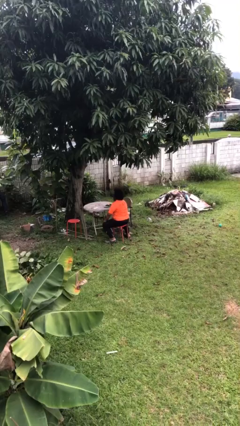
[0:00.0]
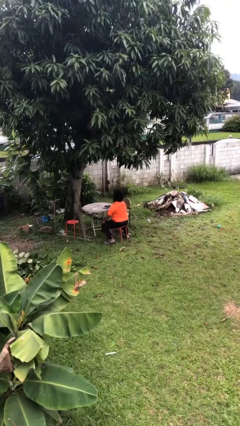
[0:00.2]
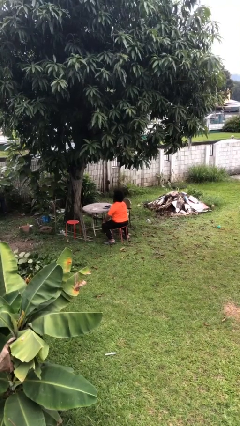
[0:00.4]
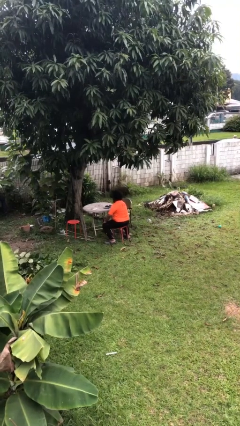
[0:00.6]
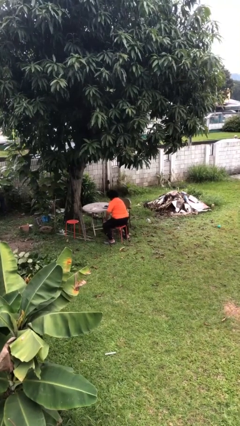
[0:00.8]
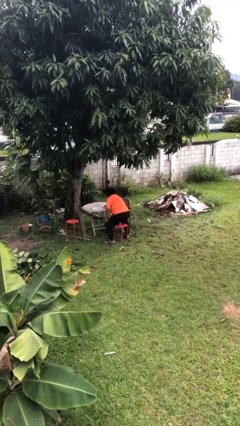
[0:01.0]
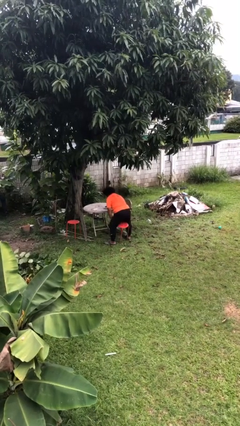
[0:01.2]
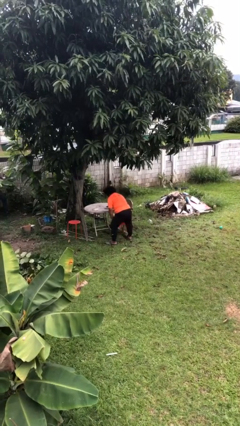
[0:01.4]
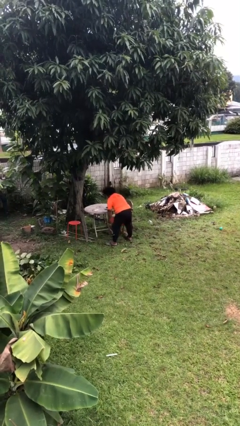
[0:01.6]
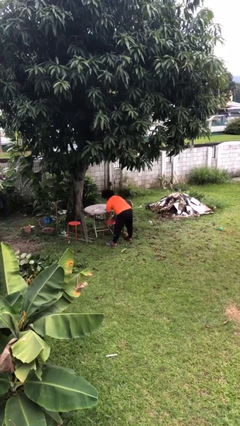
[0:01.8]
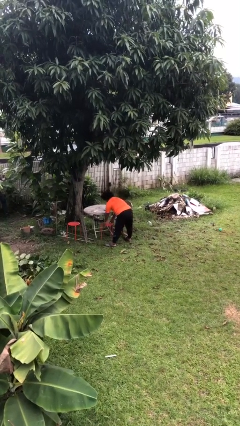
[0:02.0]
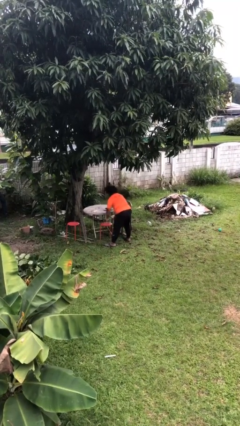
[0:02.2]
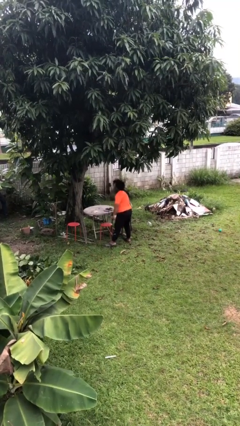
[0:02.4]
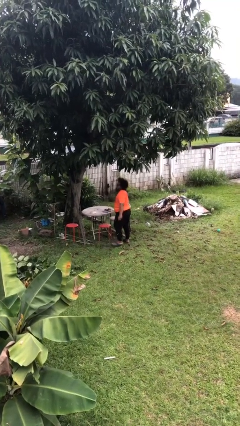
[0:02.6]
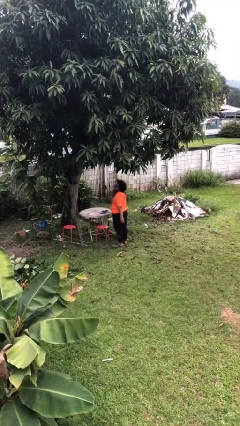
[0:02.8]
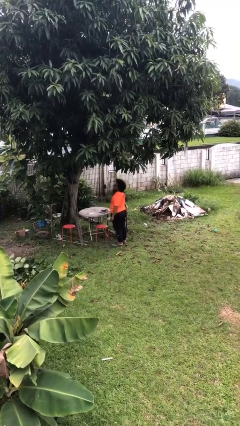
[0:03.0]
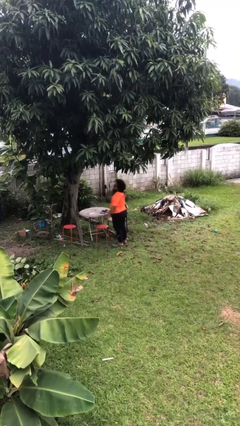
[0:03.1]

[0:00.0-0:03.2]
person stands up

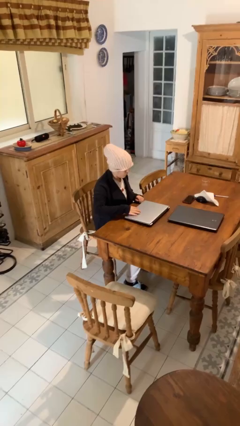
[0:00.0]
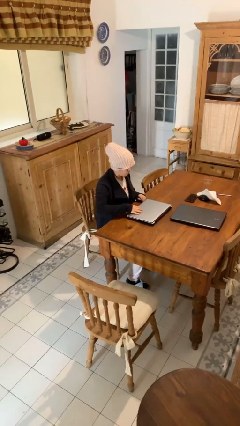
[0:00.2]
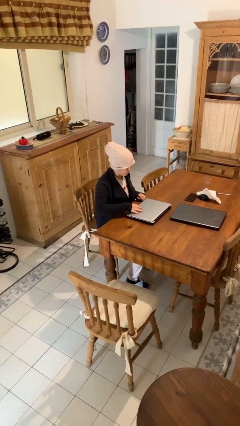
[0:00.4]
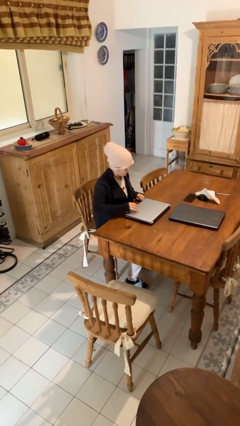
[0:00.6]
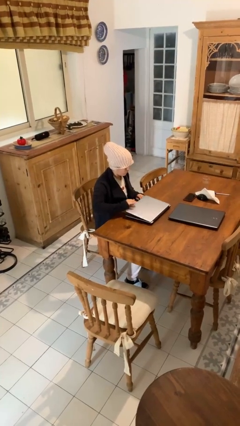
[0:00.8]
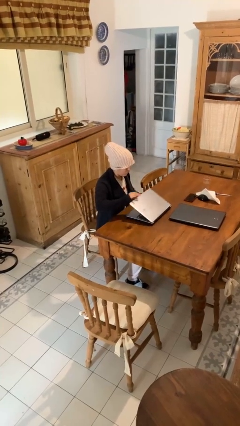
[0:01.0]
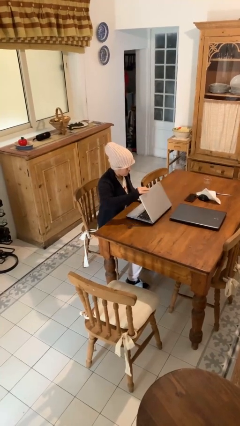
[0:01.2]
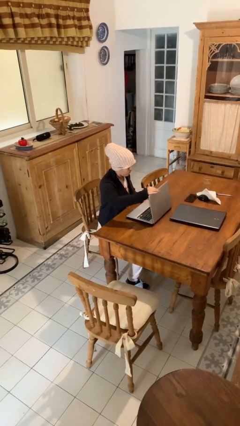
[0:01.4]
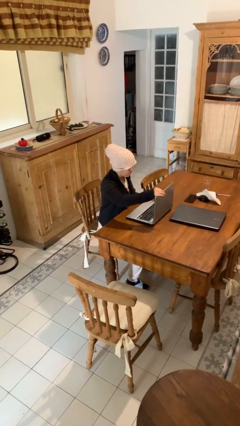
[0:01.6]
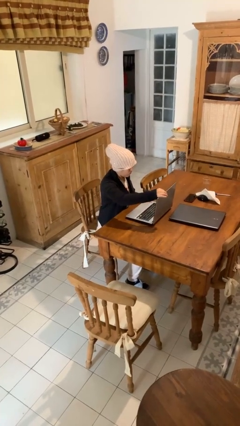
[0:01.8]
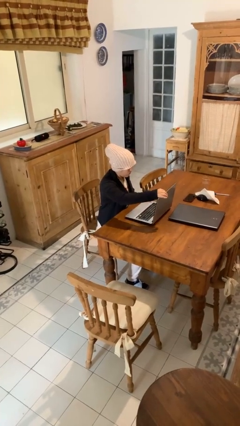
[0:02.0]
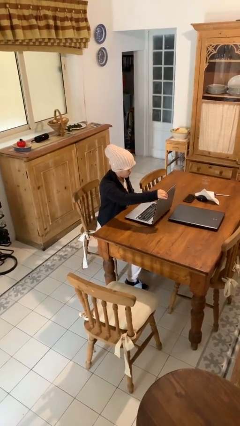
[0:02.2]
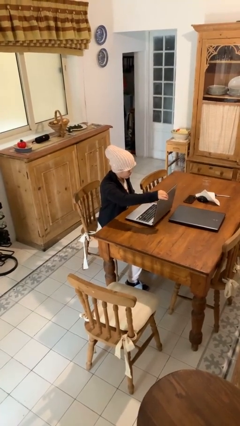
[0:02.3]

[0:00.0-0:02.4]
person opens laptop

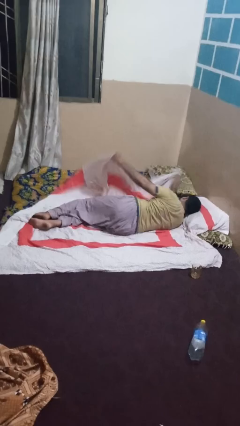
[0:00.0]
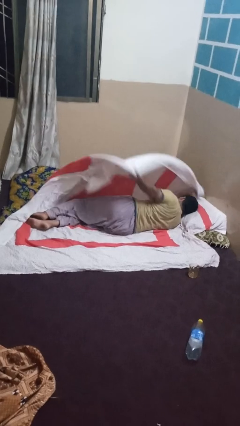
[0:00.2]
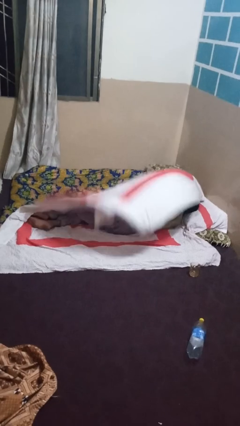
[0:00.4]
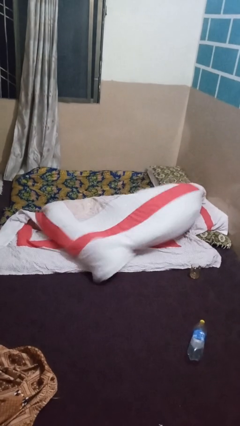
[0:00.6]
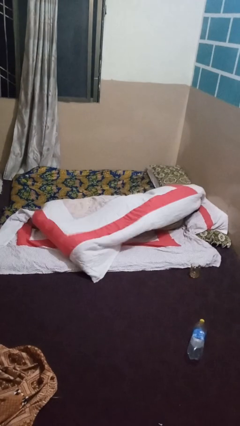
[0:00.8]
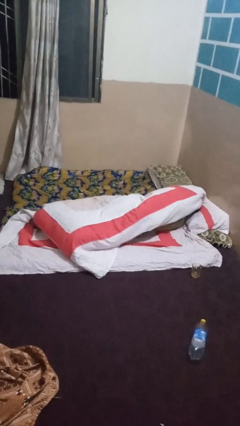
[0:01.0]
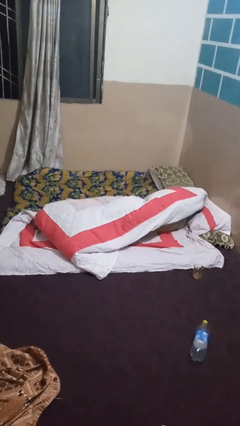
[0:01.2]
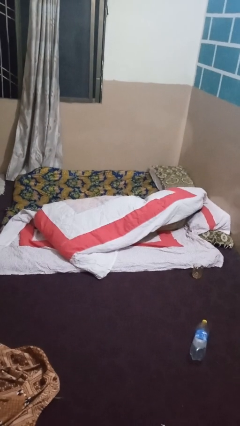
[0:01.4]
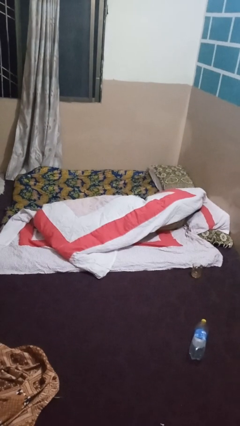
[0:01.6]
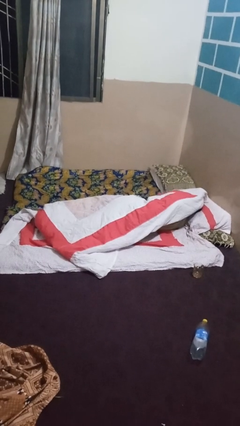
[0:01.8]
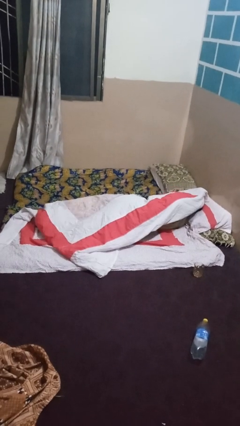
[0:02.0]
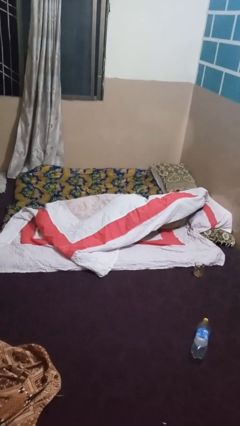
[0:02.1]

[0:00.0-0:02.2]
person covers with bedsheets

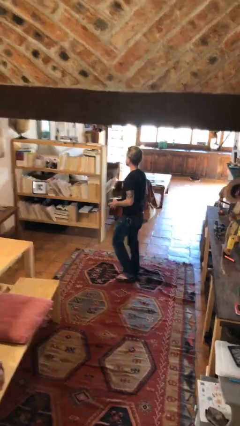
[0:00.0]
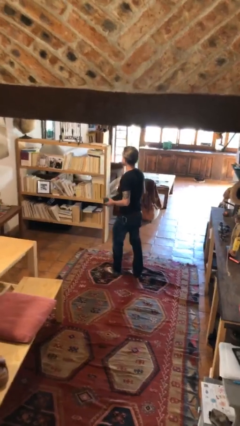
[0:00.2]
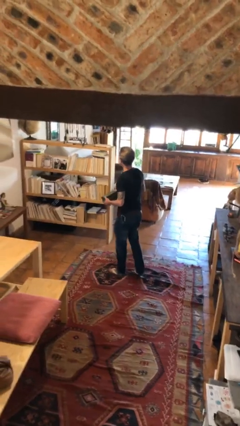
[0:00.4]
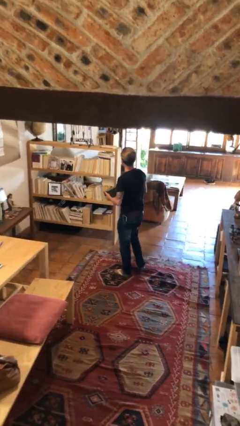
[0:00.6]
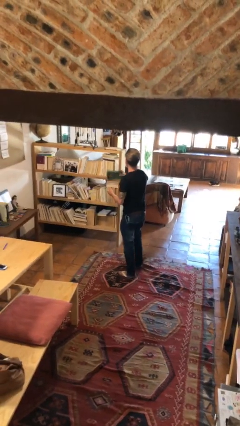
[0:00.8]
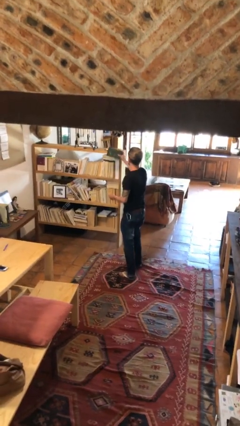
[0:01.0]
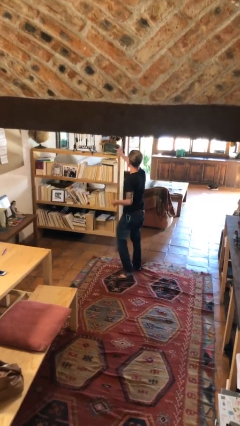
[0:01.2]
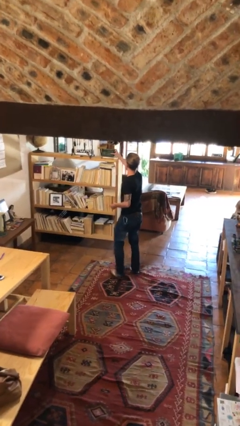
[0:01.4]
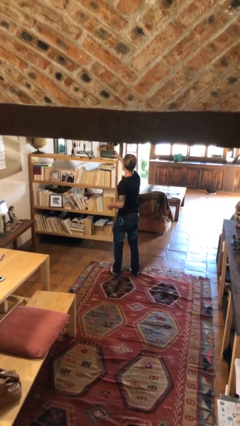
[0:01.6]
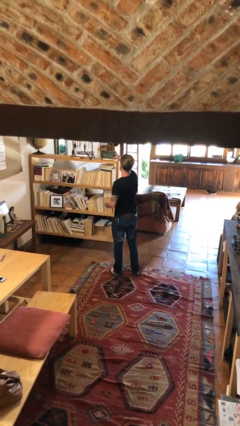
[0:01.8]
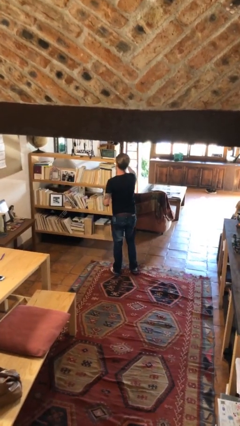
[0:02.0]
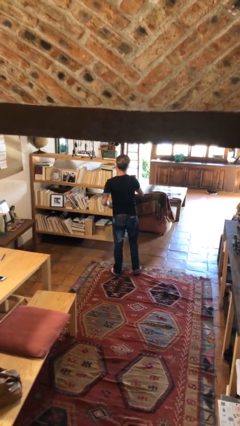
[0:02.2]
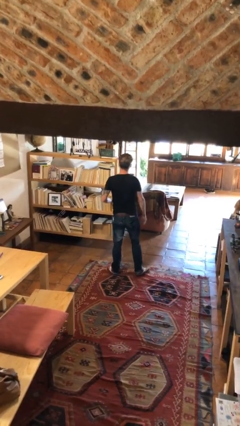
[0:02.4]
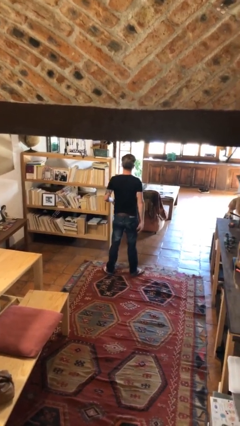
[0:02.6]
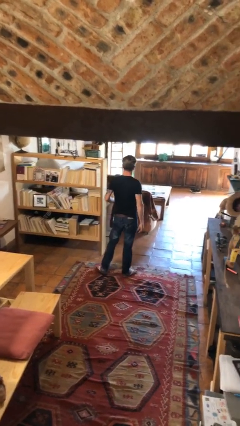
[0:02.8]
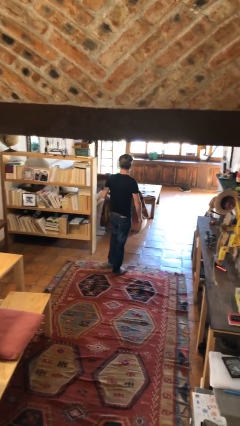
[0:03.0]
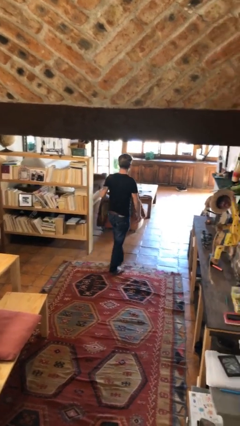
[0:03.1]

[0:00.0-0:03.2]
person puts down object on shelf

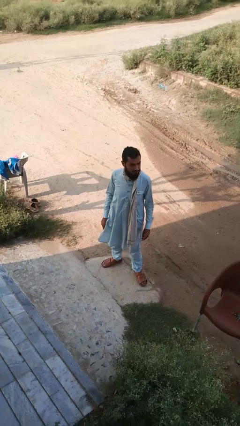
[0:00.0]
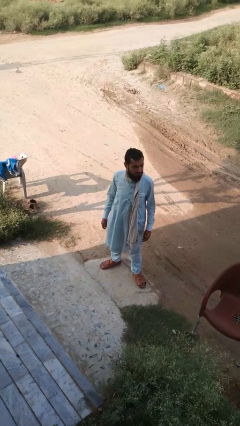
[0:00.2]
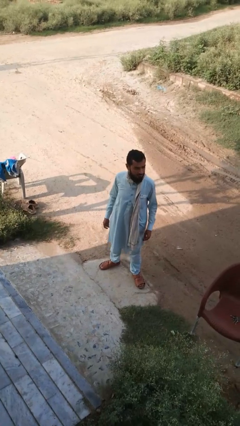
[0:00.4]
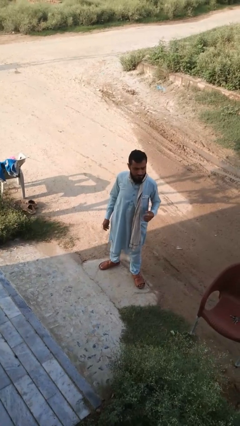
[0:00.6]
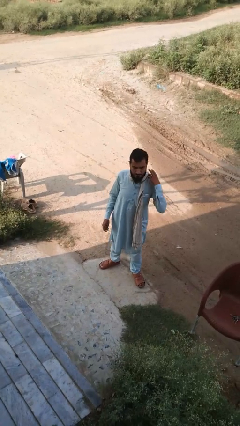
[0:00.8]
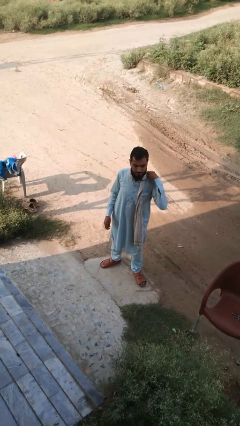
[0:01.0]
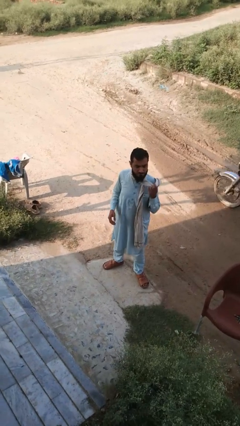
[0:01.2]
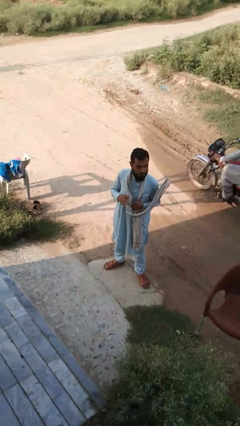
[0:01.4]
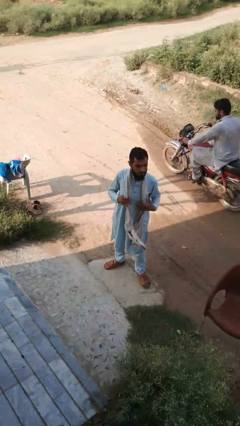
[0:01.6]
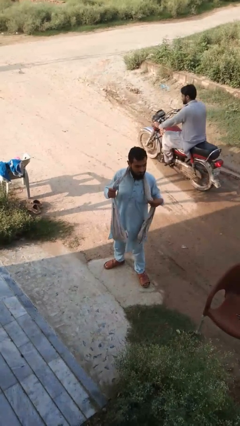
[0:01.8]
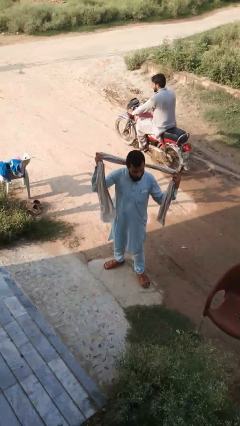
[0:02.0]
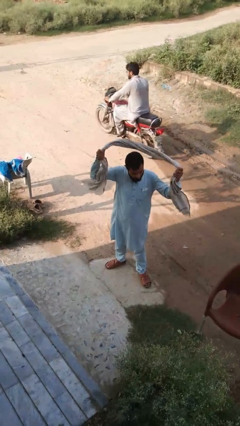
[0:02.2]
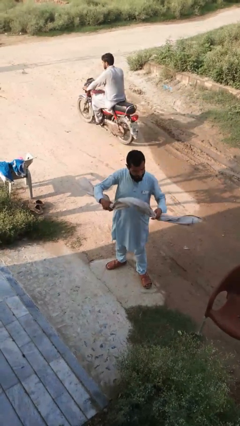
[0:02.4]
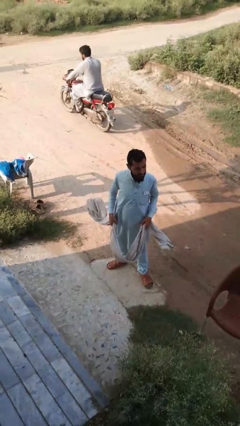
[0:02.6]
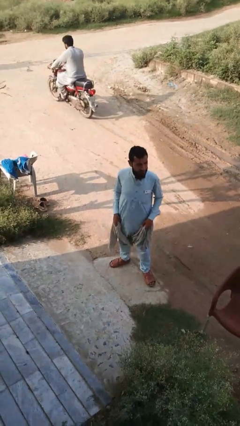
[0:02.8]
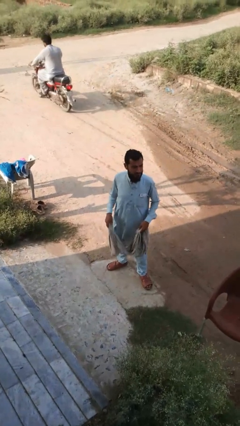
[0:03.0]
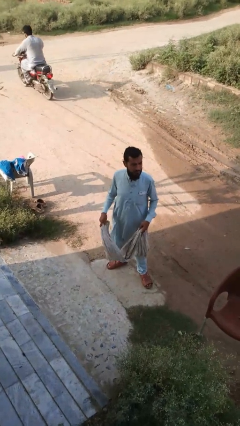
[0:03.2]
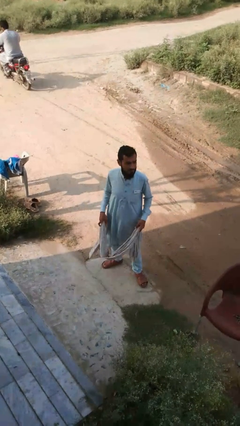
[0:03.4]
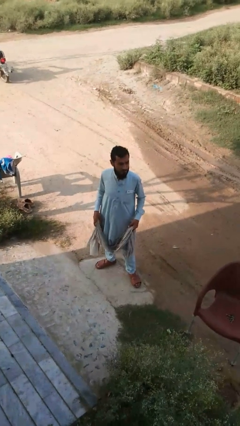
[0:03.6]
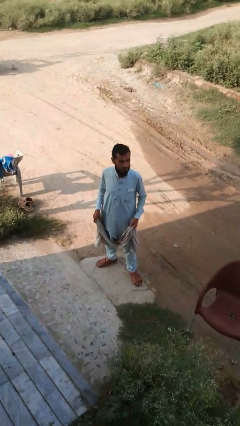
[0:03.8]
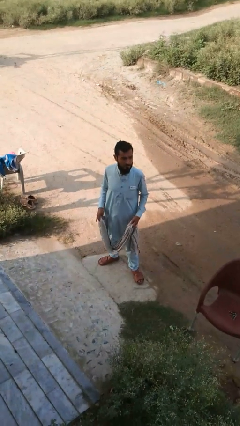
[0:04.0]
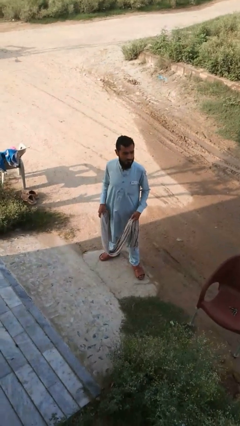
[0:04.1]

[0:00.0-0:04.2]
person takes off scarf

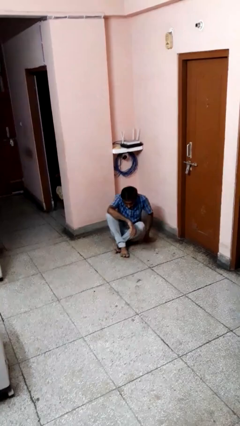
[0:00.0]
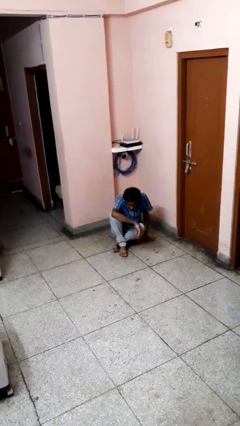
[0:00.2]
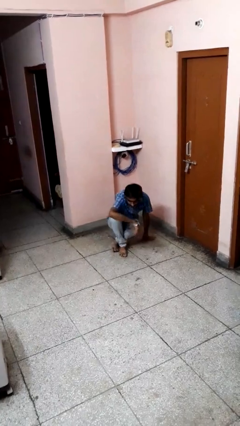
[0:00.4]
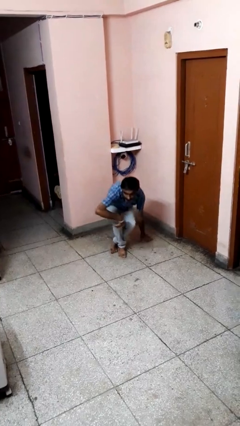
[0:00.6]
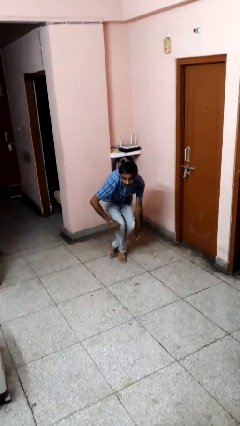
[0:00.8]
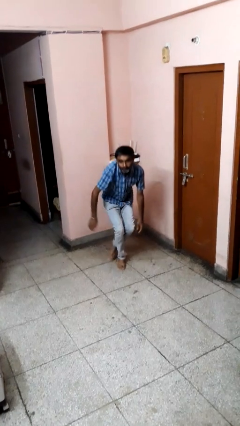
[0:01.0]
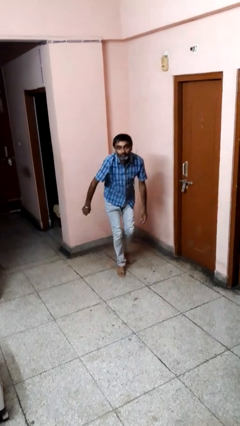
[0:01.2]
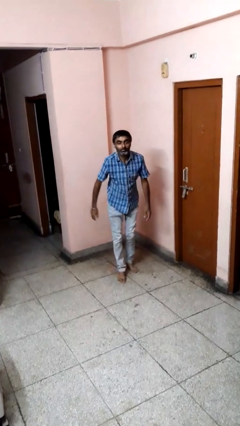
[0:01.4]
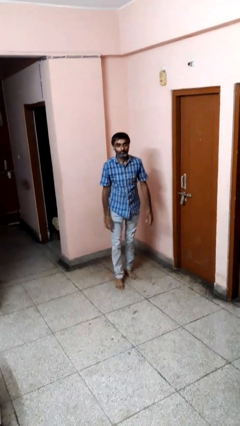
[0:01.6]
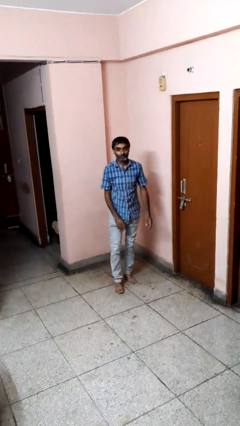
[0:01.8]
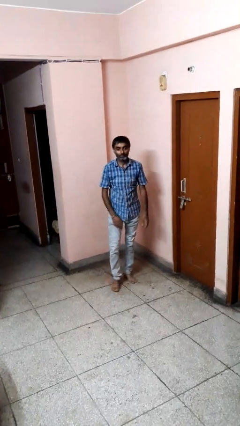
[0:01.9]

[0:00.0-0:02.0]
person stands up from floor
